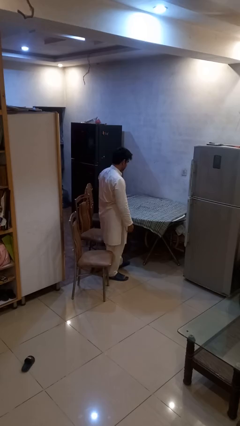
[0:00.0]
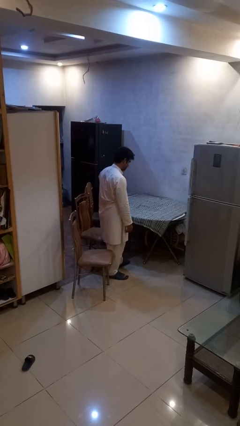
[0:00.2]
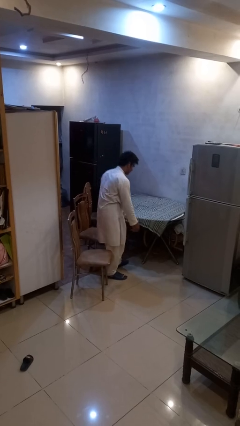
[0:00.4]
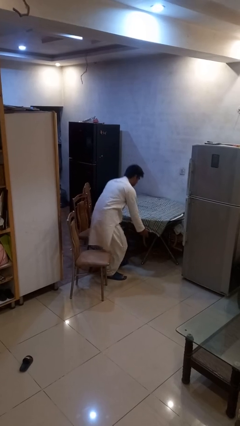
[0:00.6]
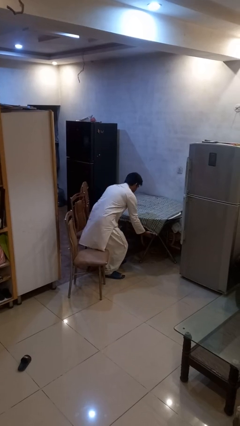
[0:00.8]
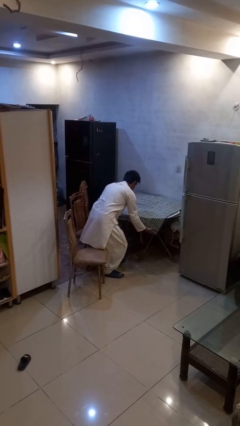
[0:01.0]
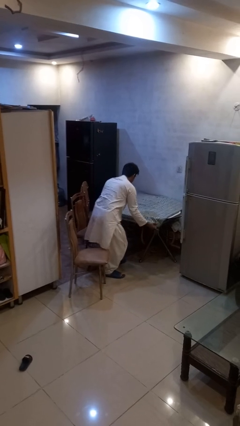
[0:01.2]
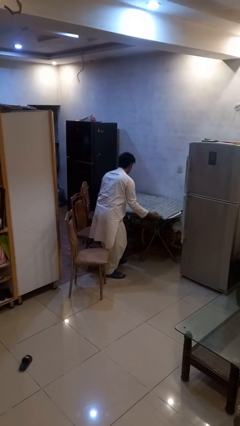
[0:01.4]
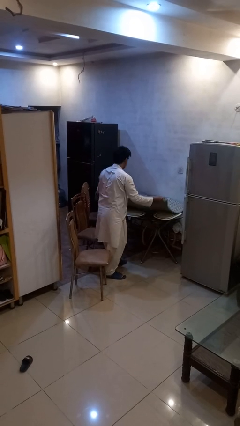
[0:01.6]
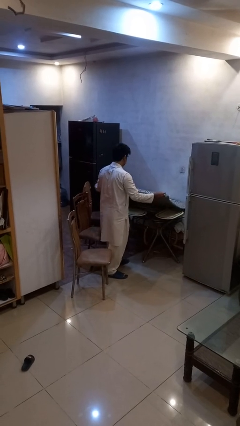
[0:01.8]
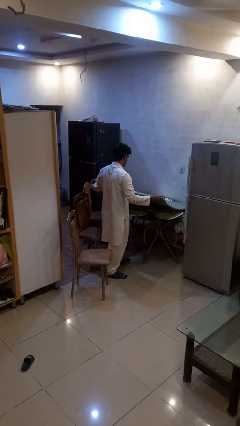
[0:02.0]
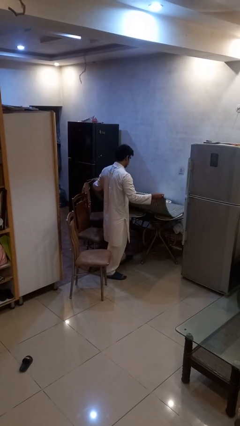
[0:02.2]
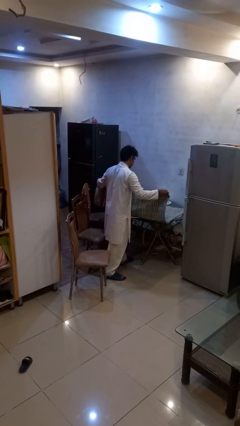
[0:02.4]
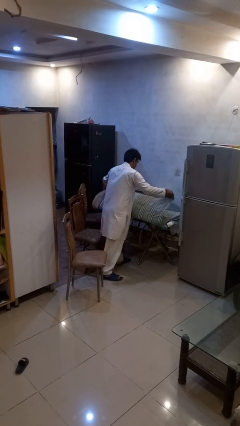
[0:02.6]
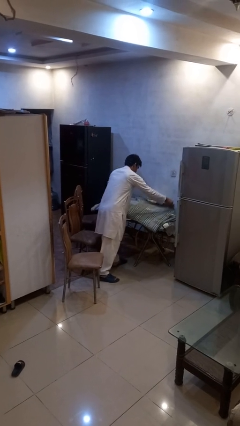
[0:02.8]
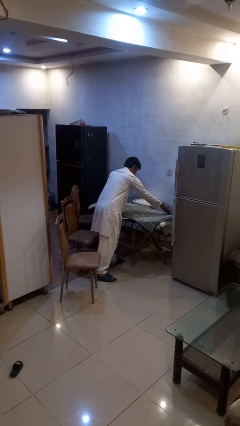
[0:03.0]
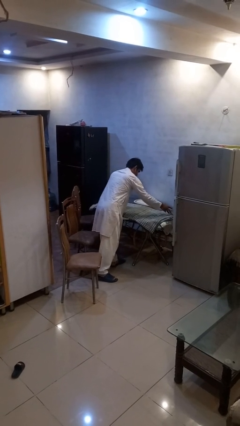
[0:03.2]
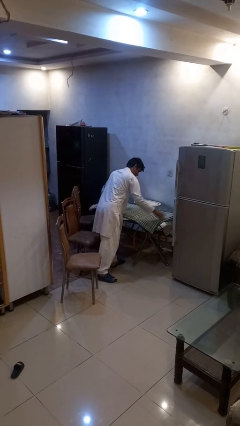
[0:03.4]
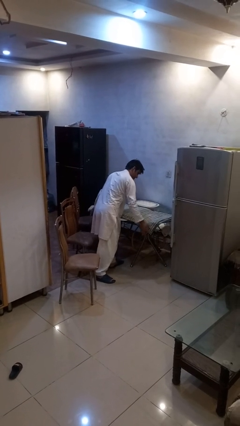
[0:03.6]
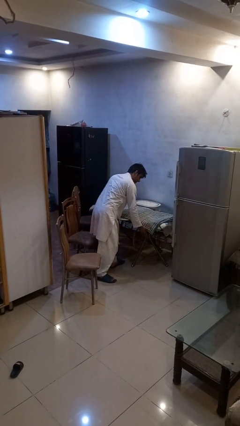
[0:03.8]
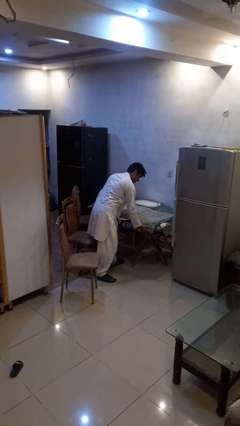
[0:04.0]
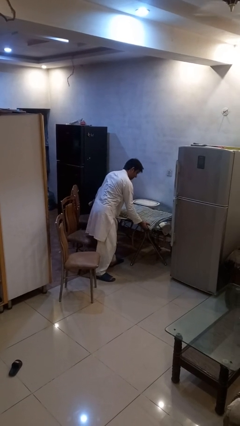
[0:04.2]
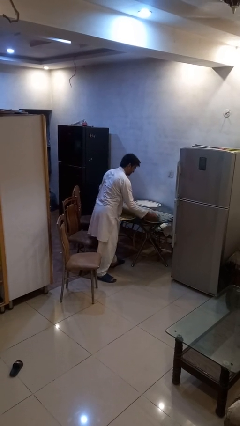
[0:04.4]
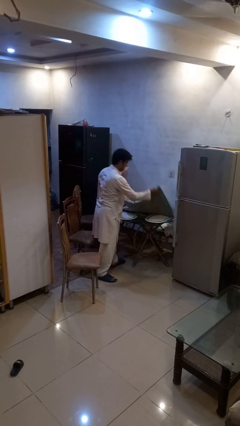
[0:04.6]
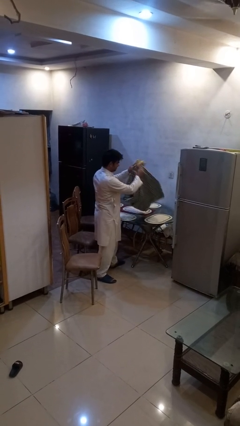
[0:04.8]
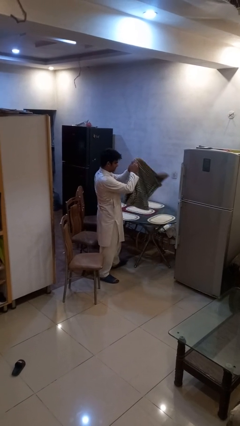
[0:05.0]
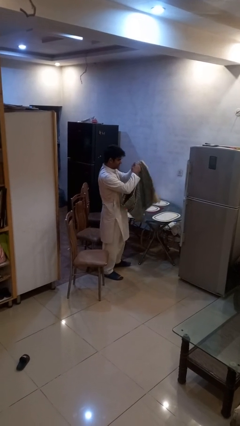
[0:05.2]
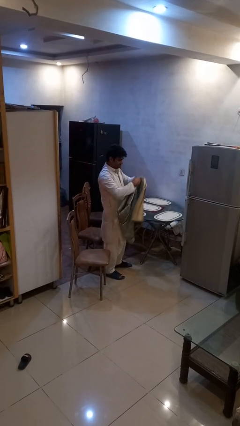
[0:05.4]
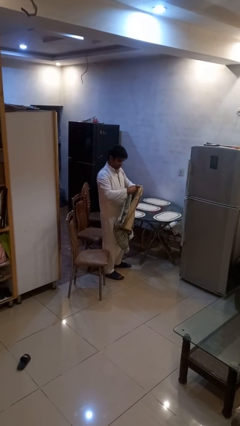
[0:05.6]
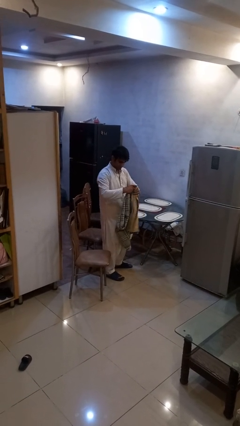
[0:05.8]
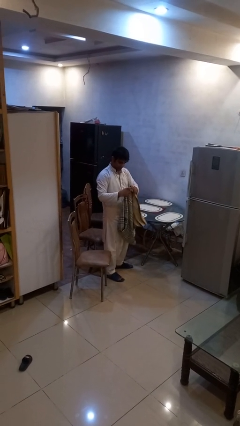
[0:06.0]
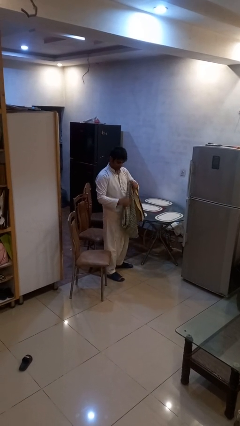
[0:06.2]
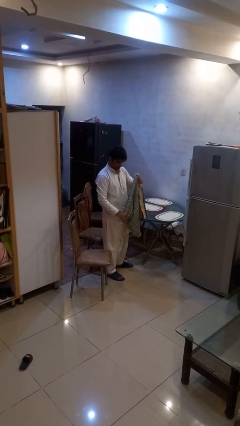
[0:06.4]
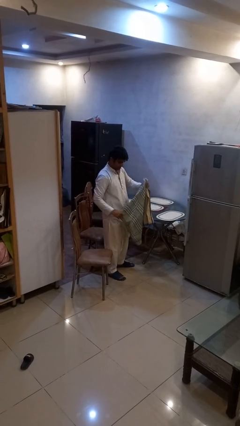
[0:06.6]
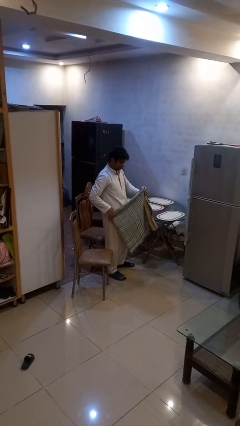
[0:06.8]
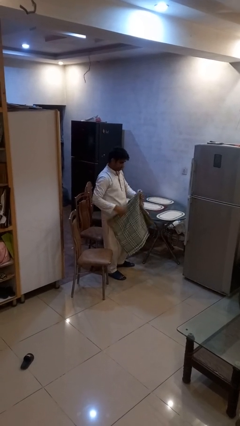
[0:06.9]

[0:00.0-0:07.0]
person folds tablecloth

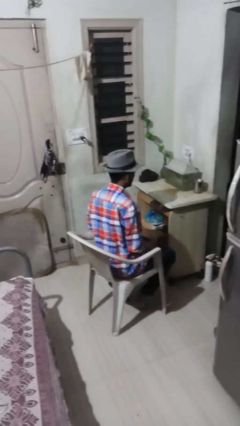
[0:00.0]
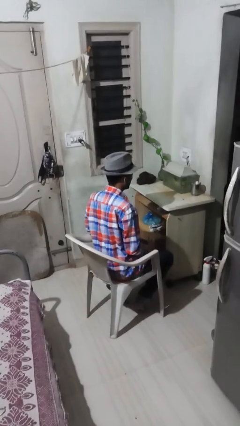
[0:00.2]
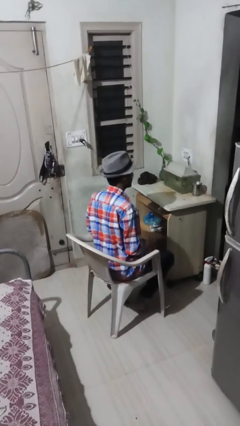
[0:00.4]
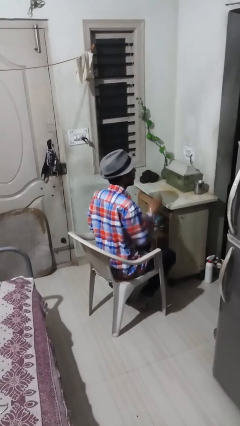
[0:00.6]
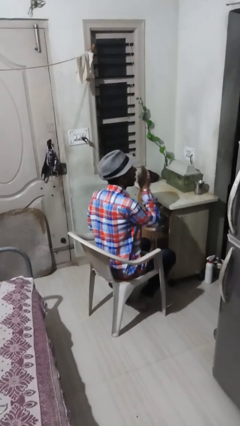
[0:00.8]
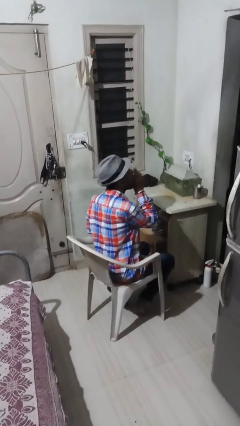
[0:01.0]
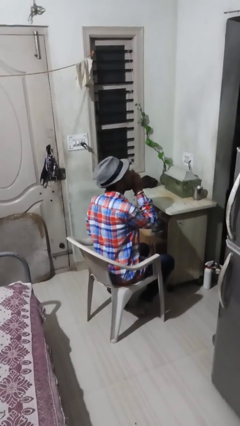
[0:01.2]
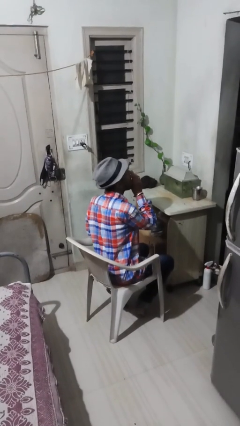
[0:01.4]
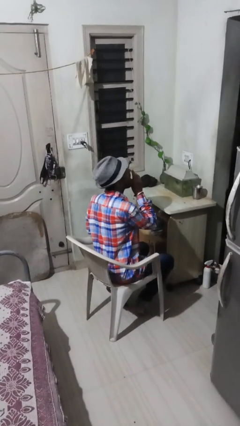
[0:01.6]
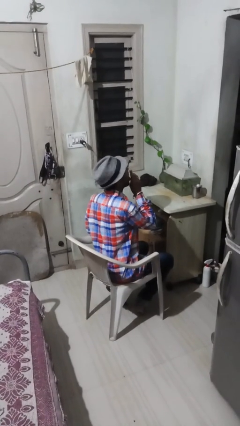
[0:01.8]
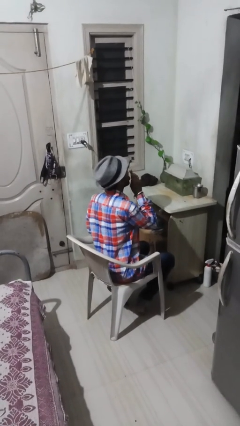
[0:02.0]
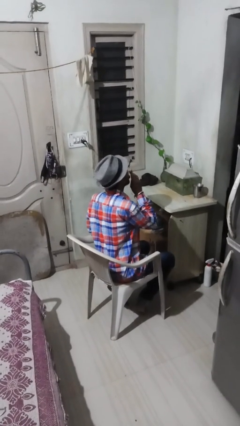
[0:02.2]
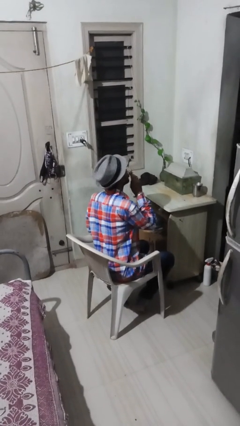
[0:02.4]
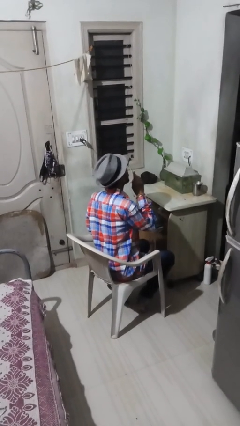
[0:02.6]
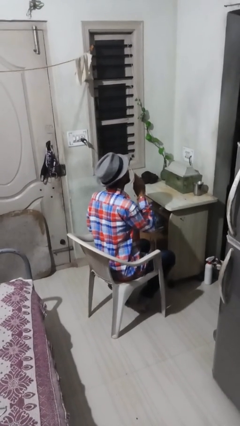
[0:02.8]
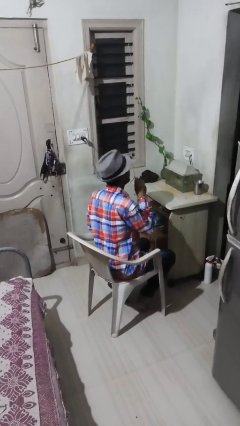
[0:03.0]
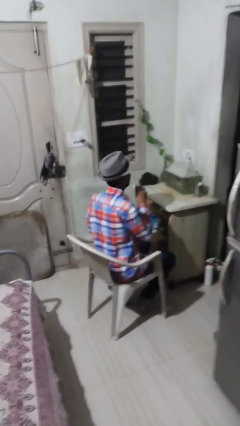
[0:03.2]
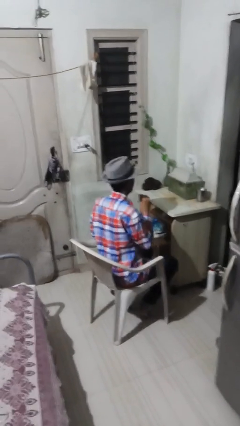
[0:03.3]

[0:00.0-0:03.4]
person licks fingers

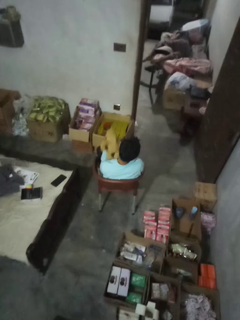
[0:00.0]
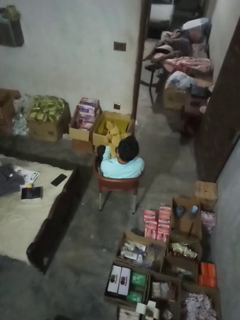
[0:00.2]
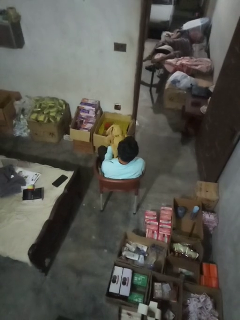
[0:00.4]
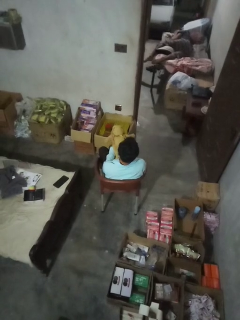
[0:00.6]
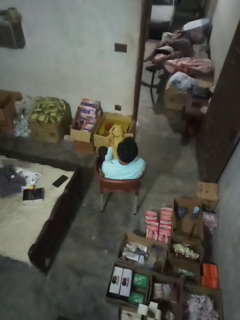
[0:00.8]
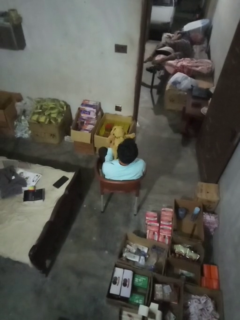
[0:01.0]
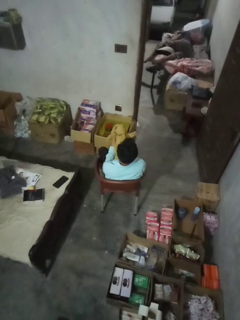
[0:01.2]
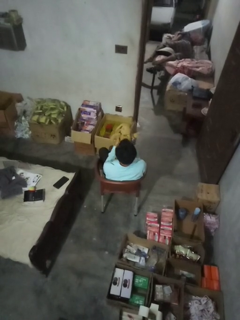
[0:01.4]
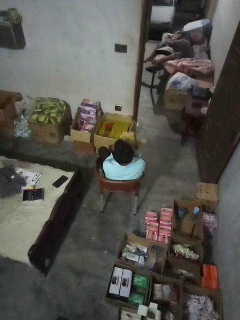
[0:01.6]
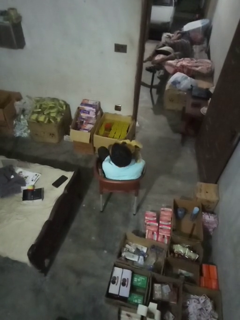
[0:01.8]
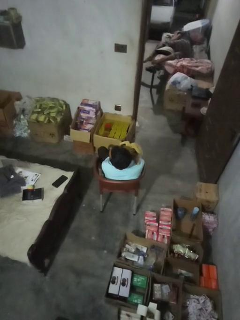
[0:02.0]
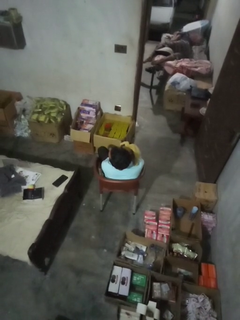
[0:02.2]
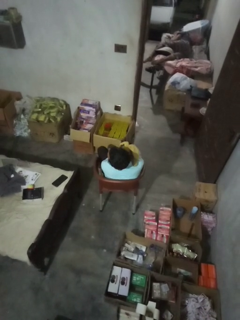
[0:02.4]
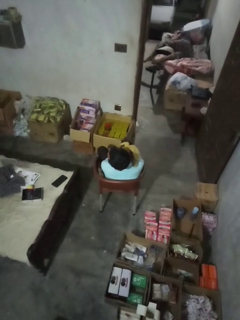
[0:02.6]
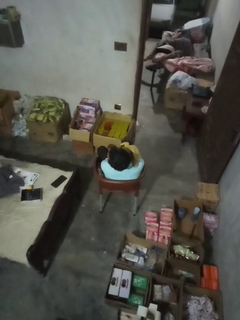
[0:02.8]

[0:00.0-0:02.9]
person hugs stuffed animal

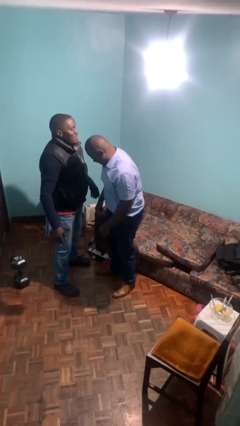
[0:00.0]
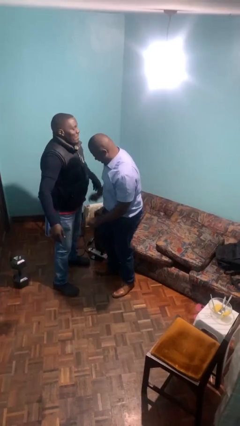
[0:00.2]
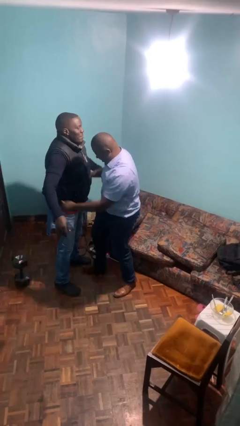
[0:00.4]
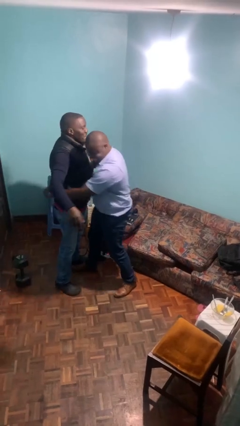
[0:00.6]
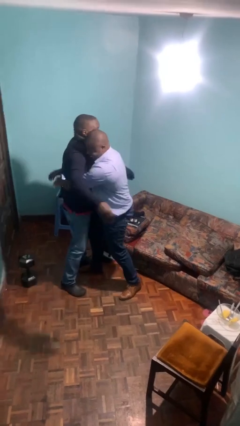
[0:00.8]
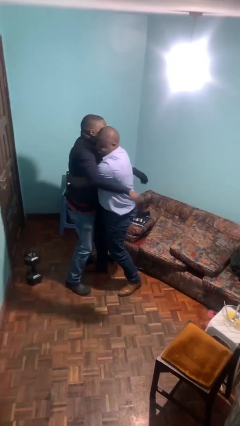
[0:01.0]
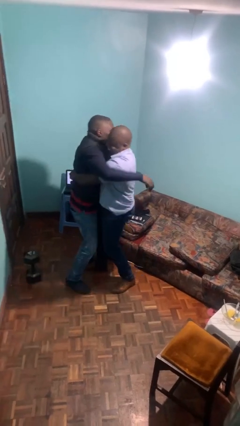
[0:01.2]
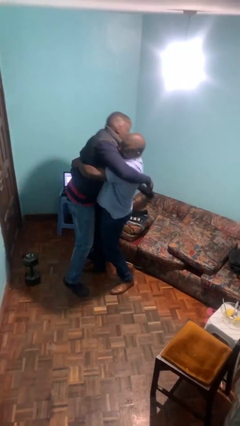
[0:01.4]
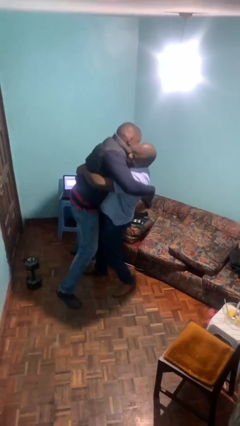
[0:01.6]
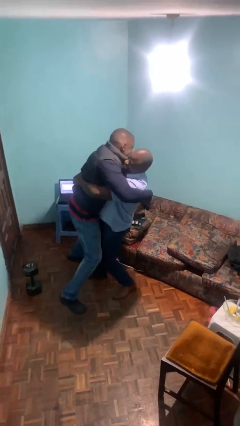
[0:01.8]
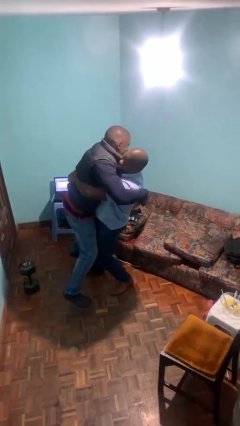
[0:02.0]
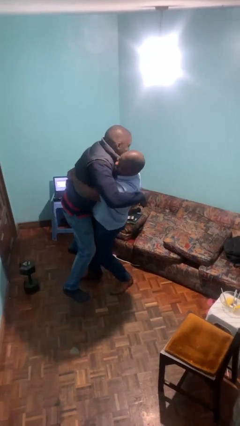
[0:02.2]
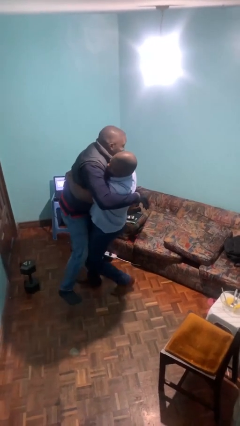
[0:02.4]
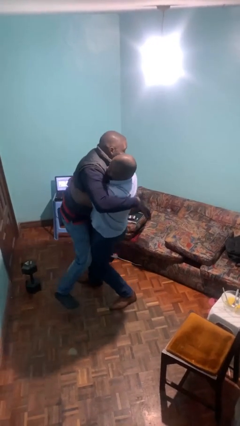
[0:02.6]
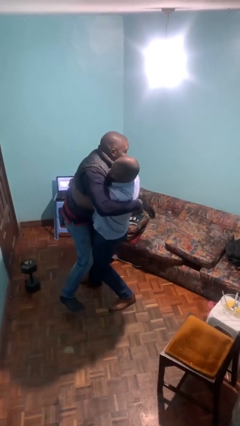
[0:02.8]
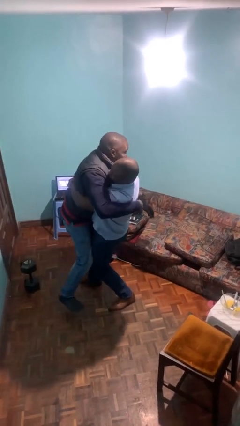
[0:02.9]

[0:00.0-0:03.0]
person picks up person

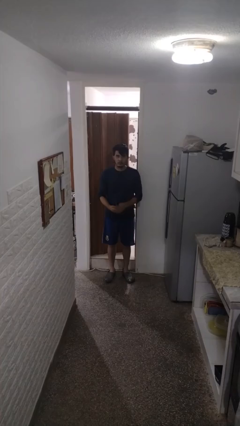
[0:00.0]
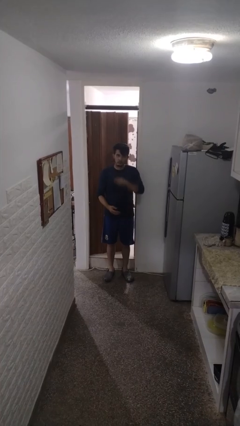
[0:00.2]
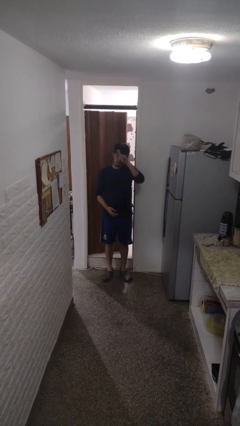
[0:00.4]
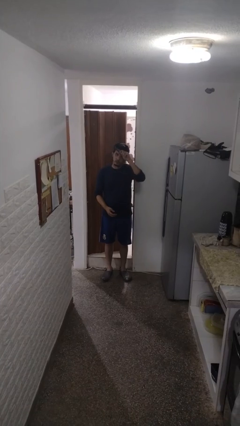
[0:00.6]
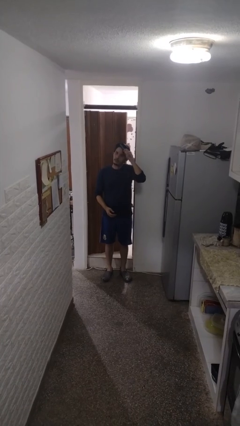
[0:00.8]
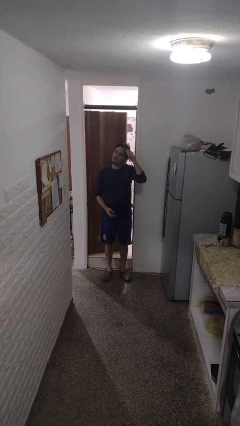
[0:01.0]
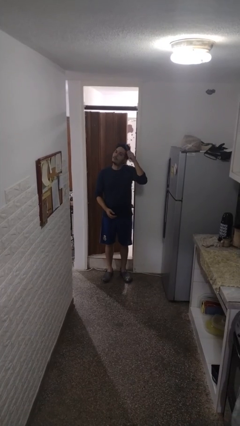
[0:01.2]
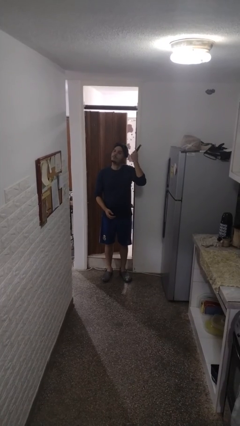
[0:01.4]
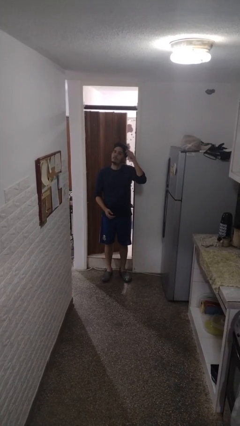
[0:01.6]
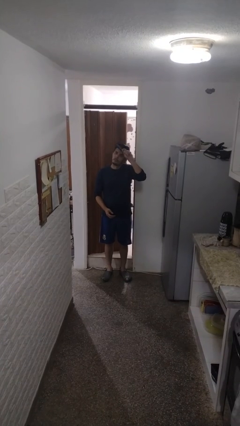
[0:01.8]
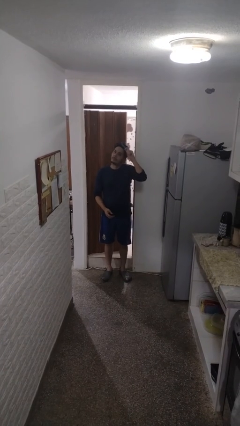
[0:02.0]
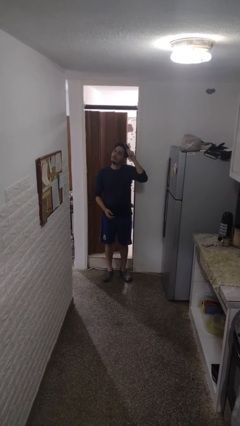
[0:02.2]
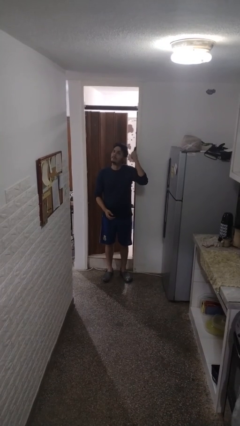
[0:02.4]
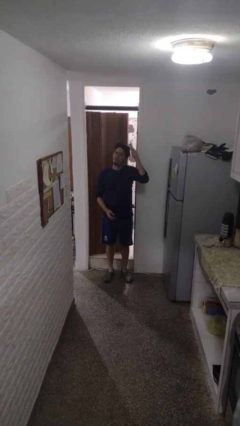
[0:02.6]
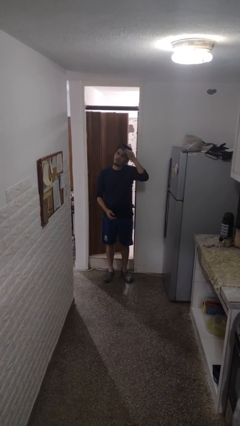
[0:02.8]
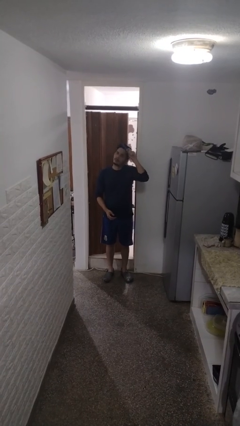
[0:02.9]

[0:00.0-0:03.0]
person brushes hair
